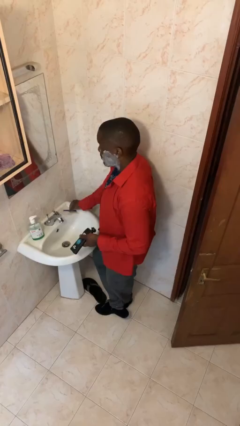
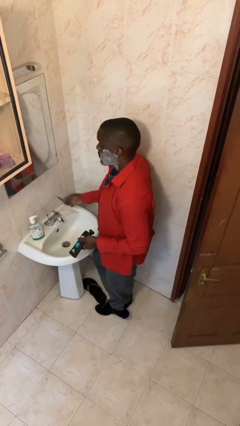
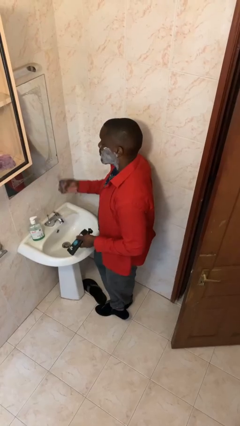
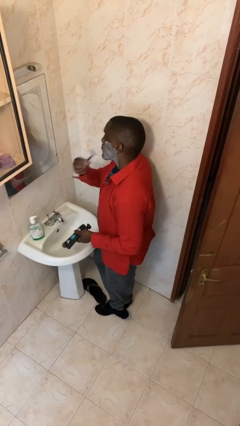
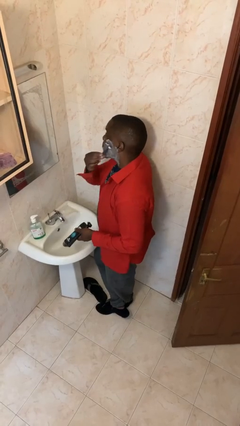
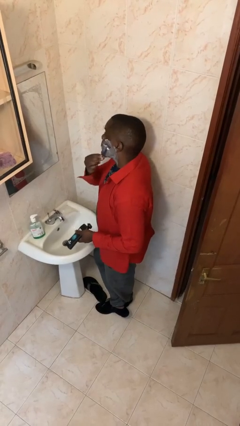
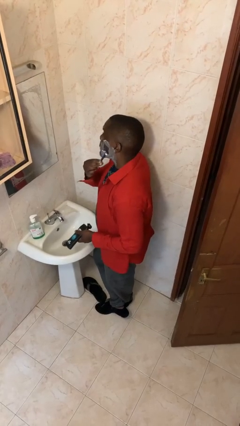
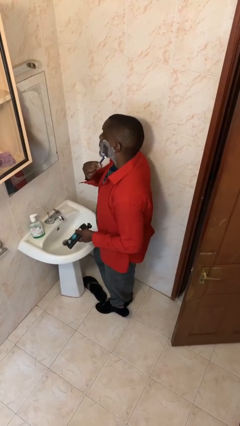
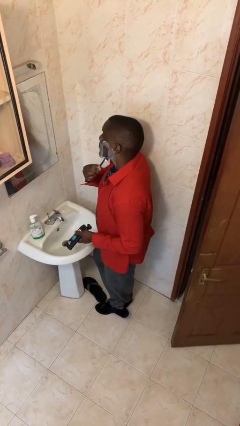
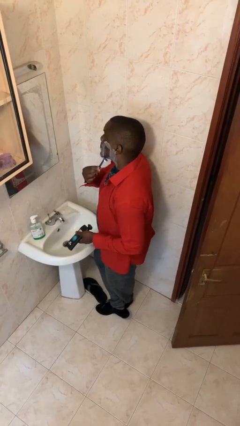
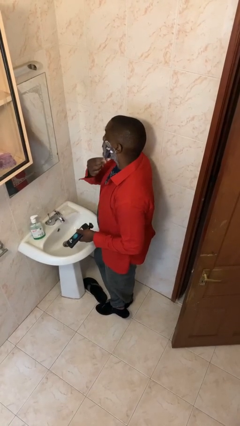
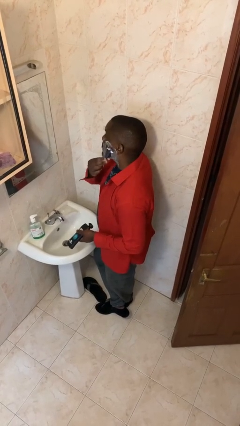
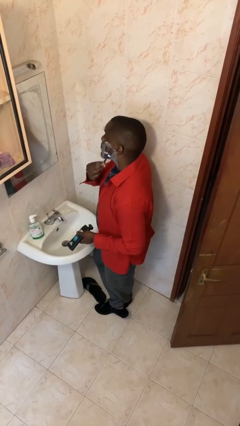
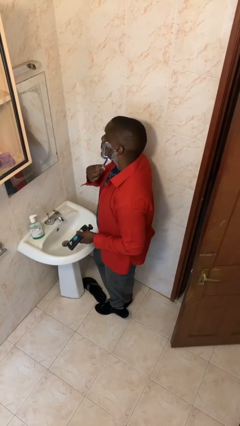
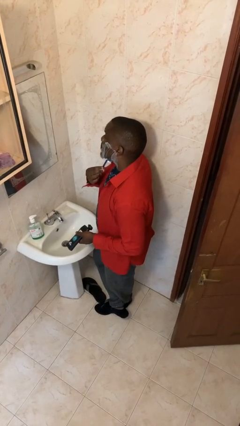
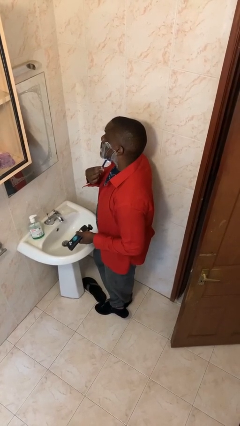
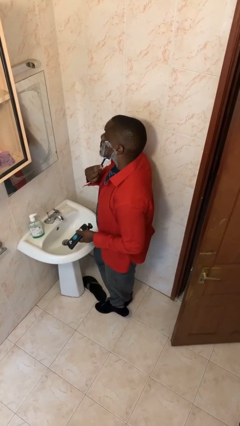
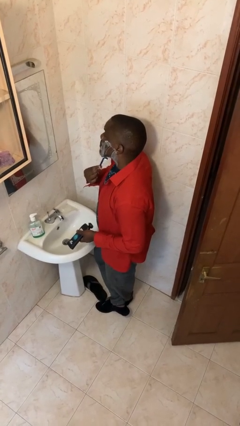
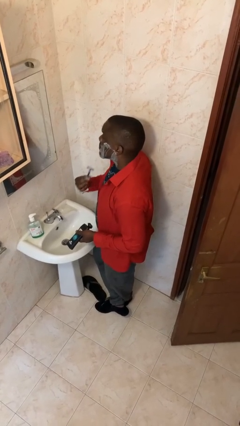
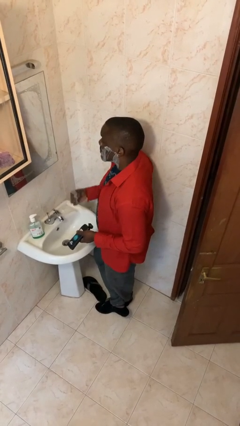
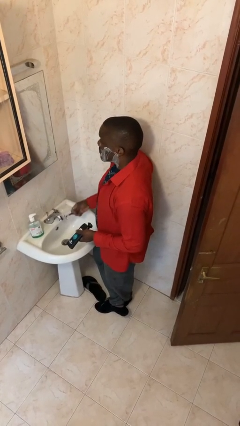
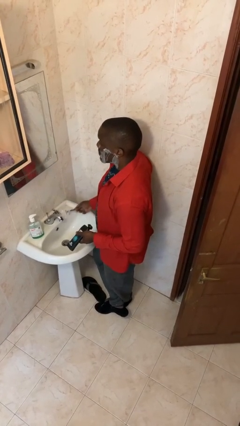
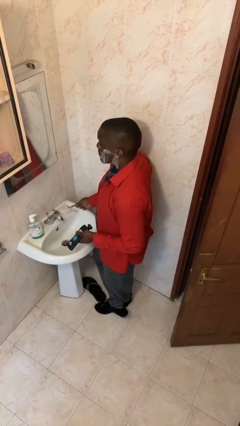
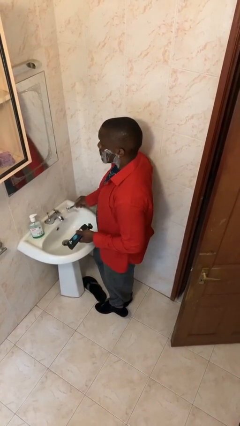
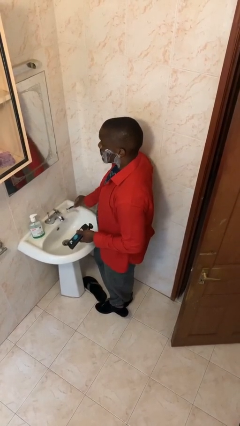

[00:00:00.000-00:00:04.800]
person shaves face

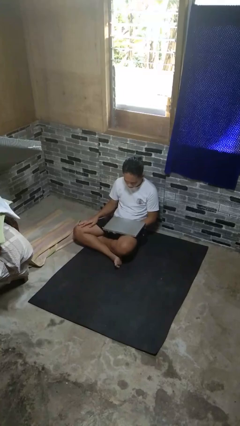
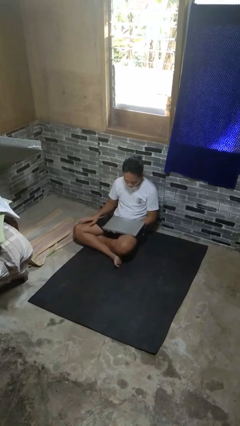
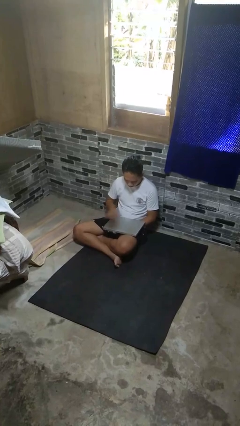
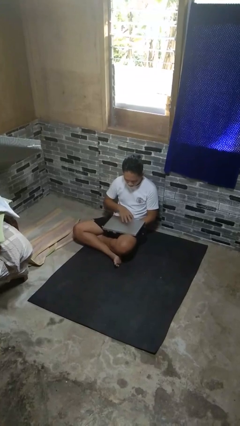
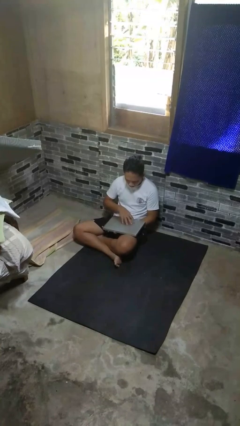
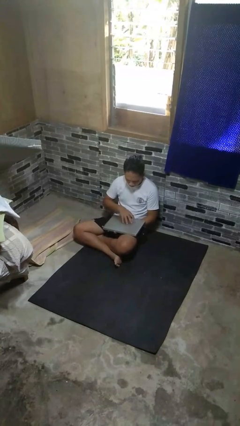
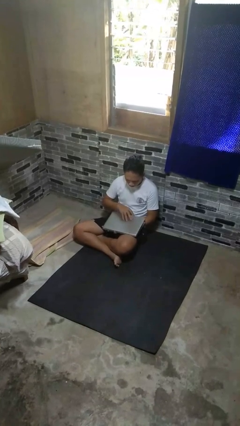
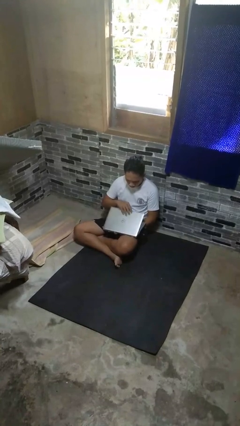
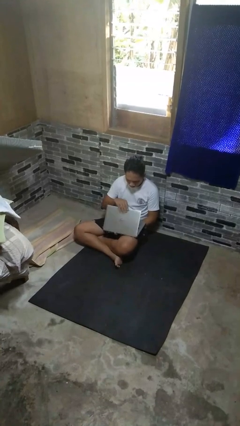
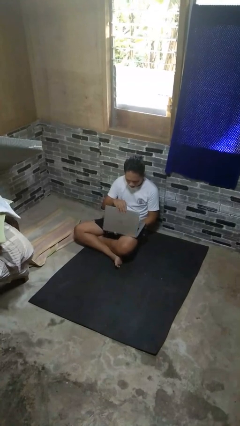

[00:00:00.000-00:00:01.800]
person opens laptop

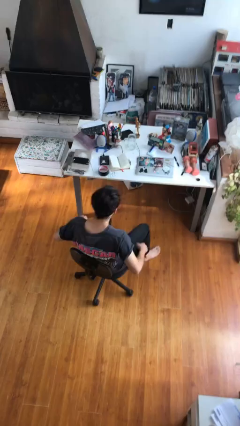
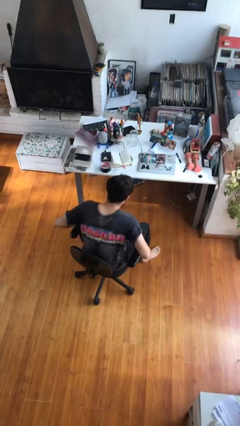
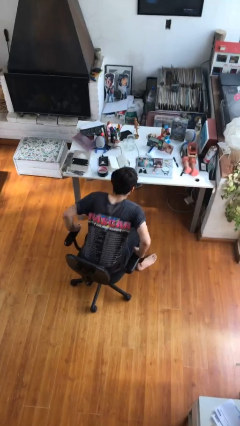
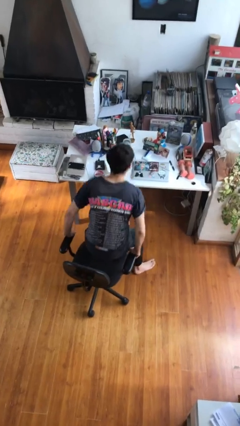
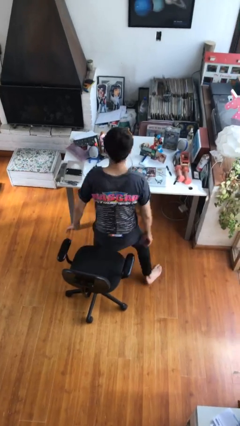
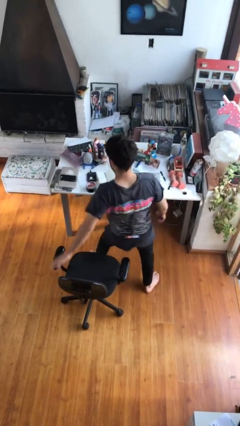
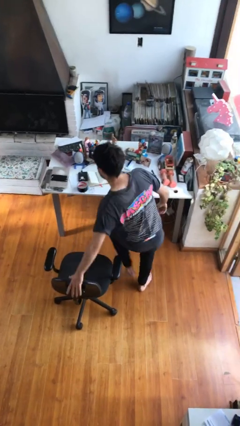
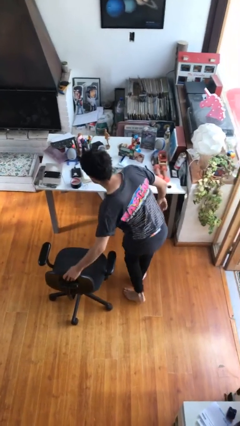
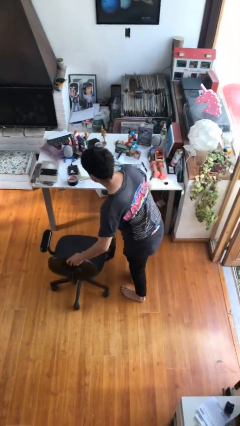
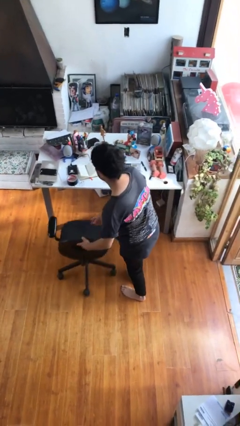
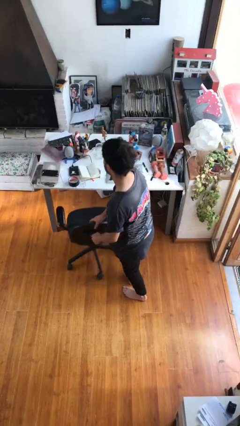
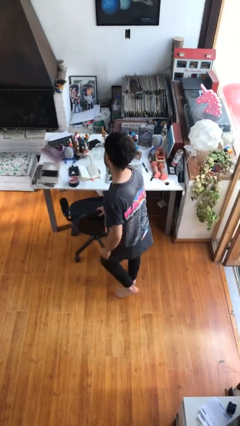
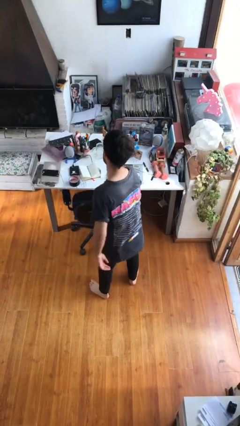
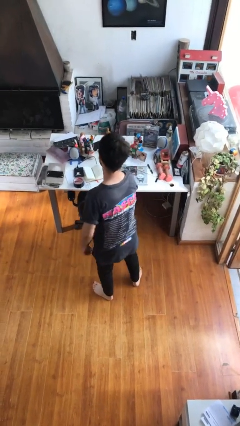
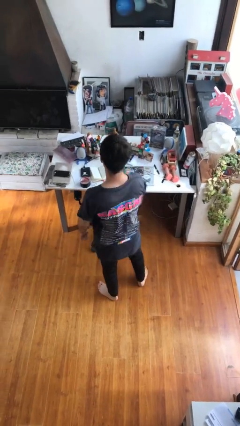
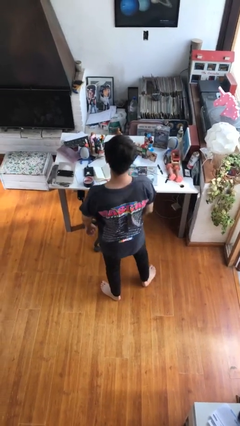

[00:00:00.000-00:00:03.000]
person stands up

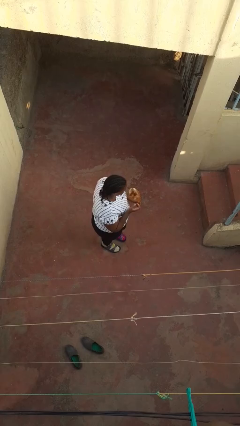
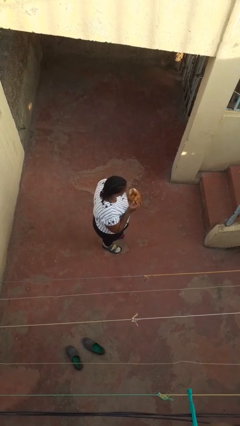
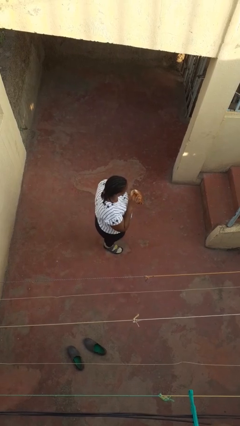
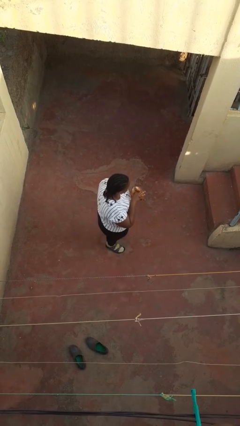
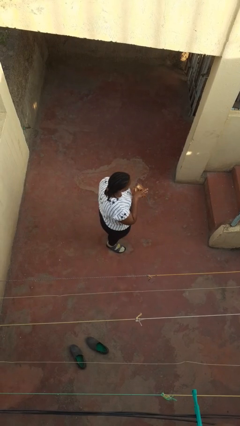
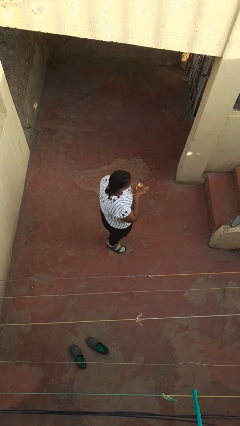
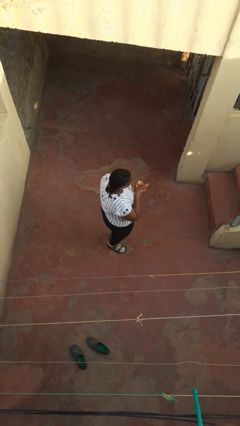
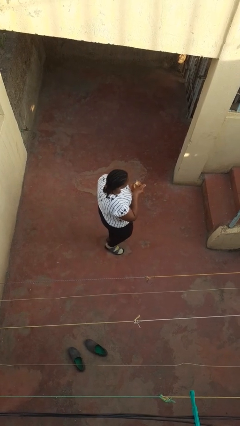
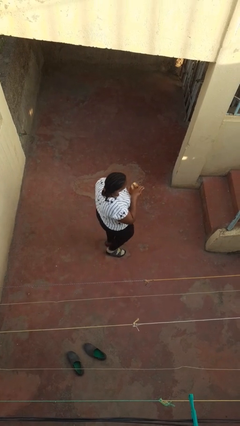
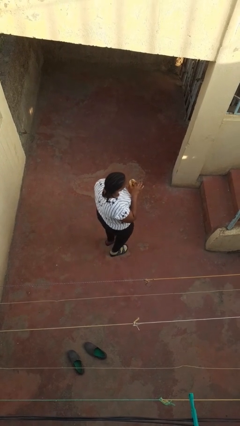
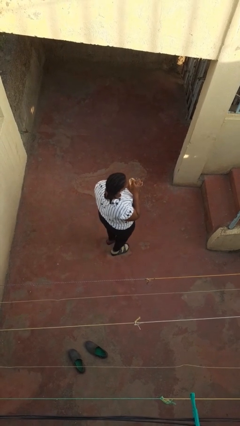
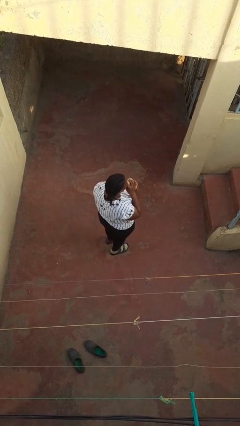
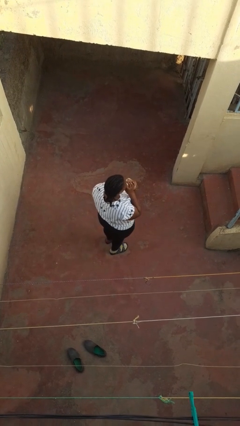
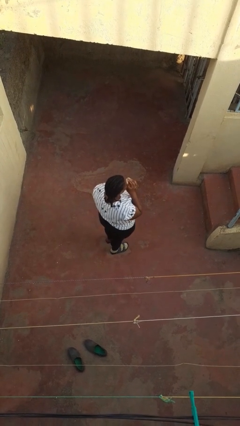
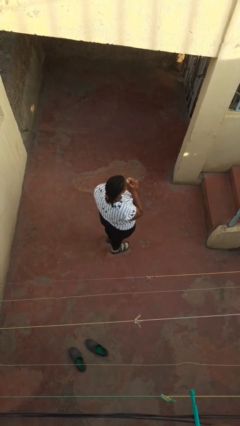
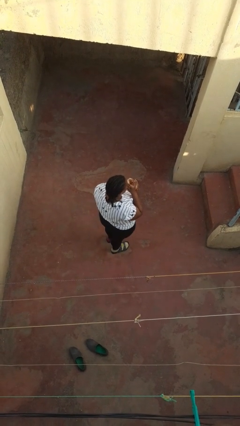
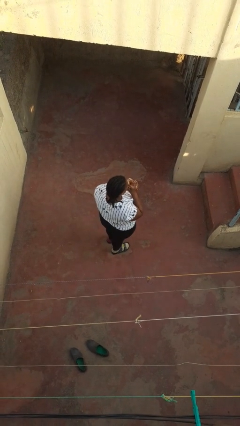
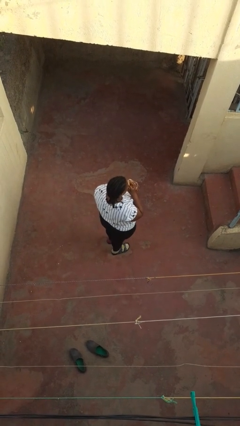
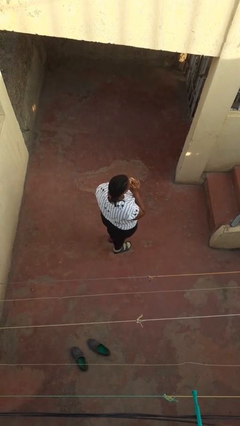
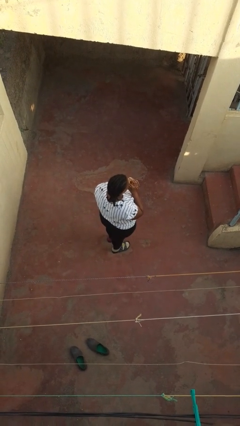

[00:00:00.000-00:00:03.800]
person eats snack from bag

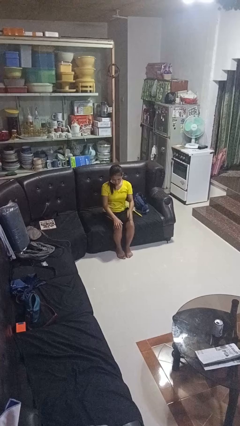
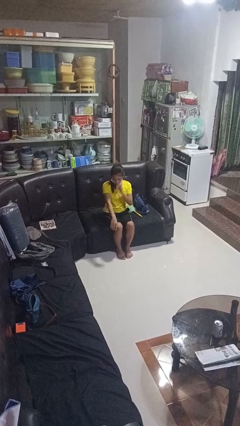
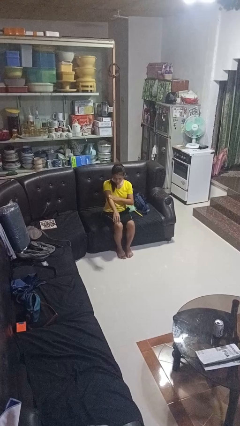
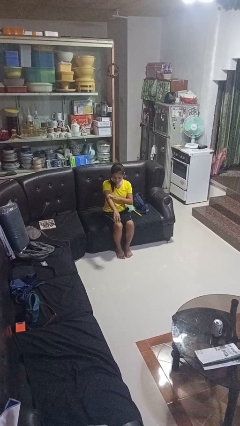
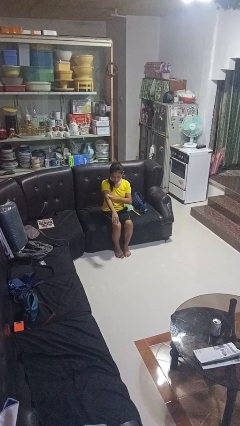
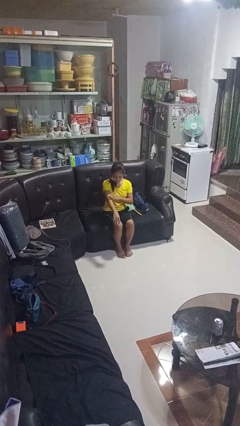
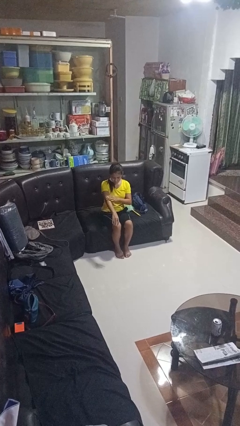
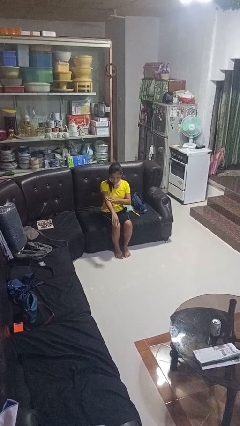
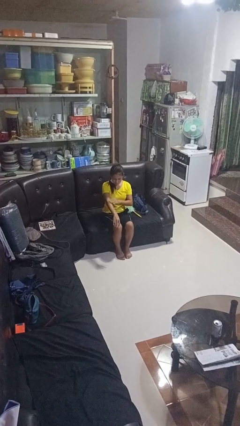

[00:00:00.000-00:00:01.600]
person swats bug

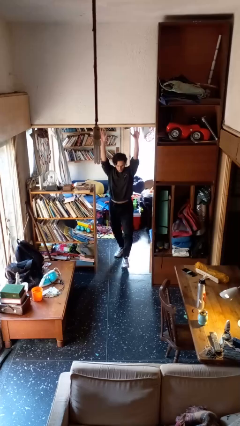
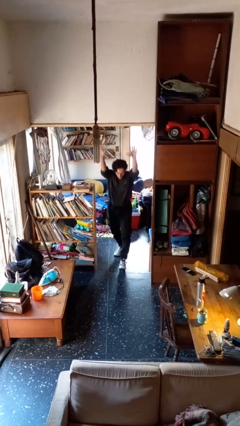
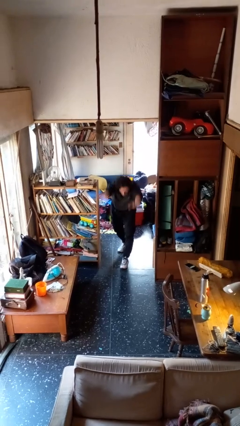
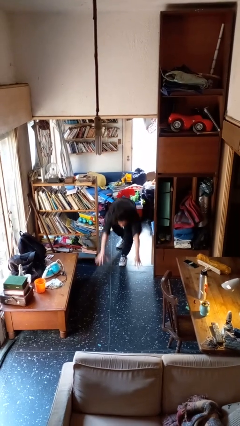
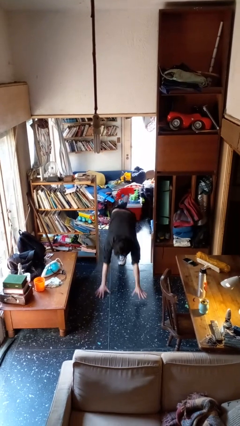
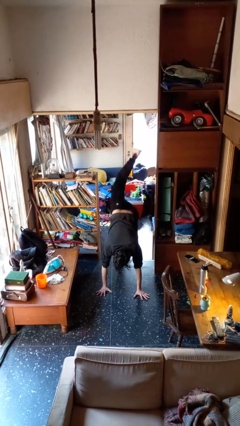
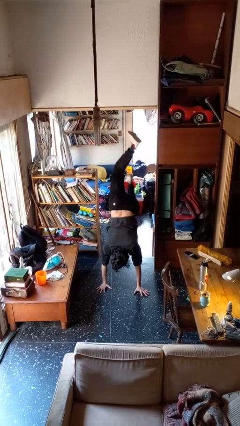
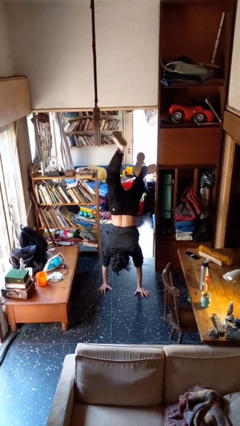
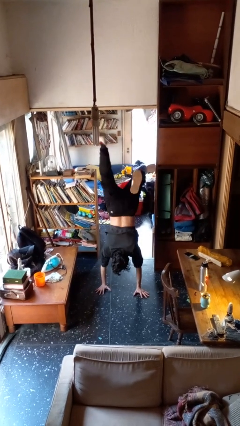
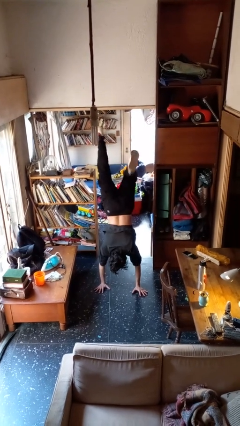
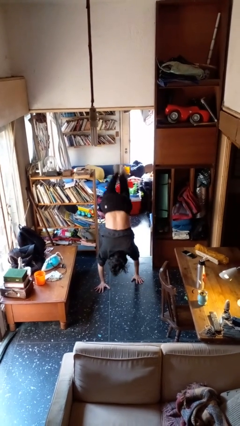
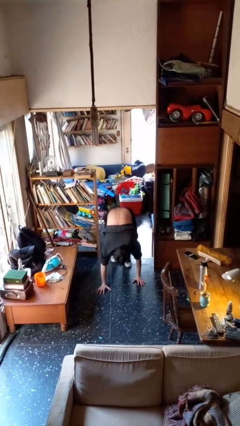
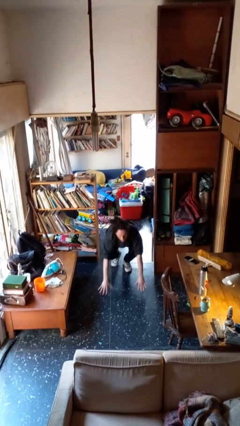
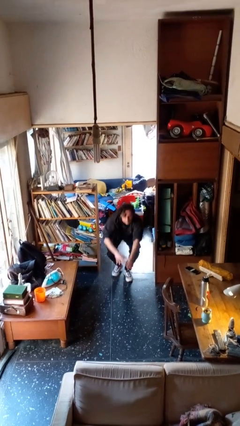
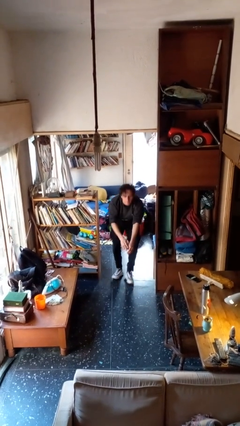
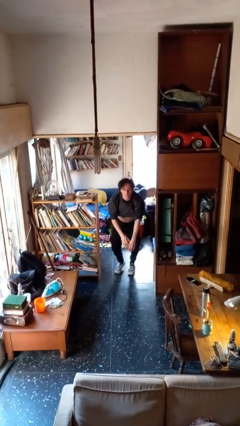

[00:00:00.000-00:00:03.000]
person handstand
